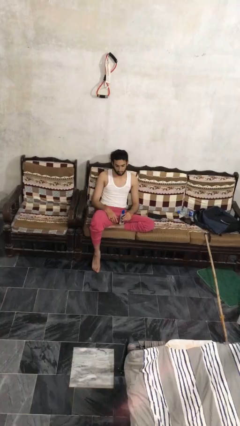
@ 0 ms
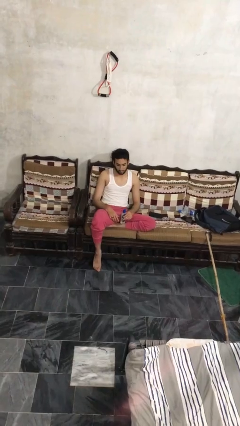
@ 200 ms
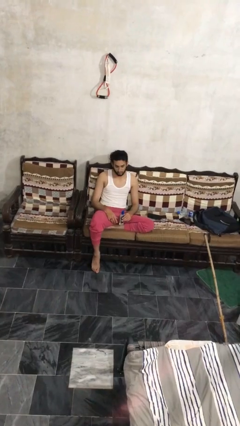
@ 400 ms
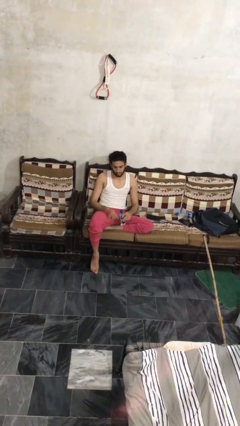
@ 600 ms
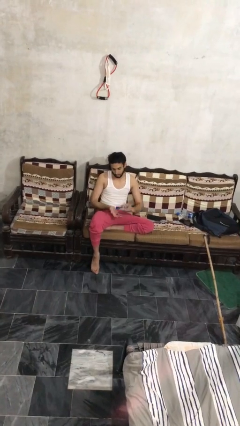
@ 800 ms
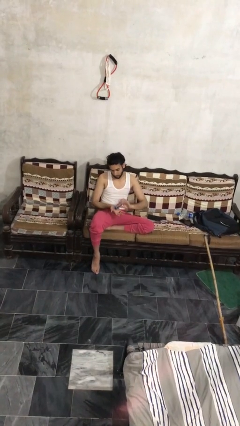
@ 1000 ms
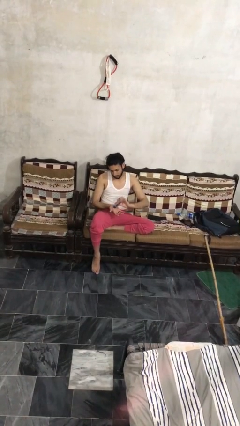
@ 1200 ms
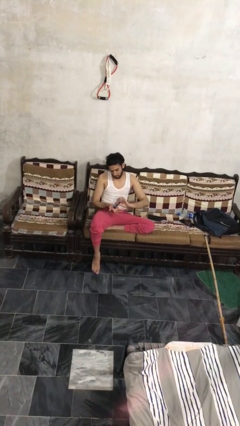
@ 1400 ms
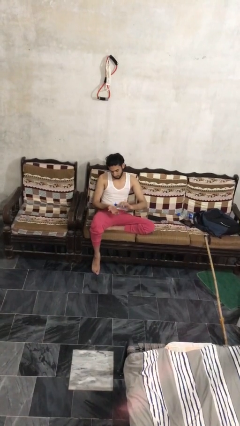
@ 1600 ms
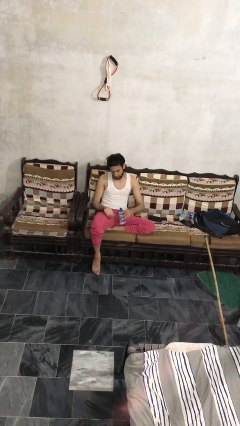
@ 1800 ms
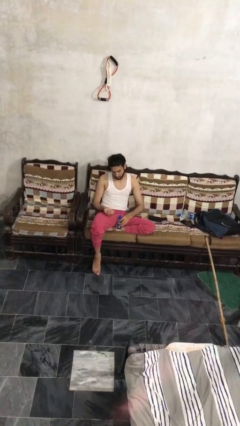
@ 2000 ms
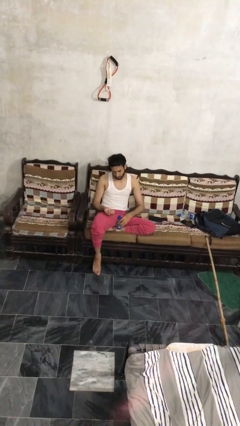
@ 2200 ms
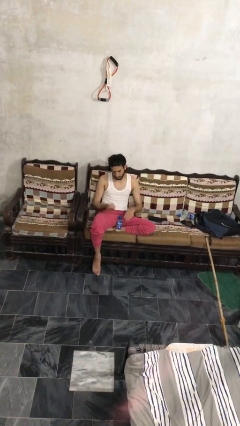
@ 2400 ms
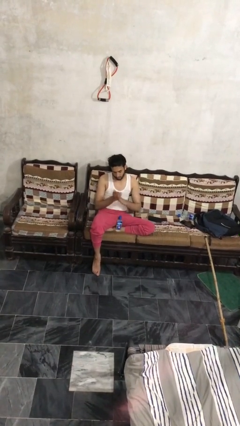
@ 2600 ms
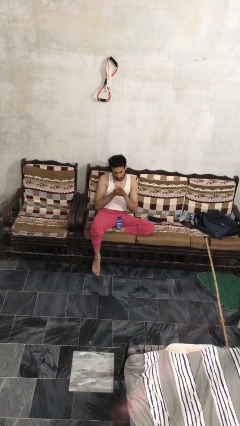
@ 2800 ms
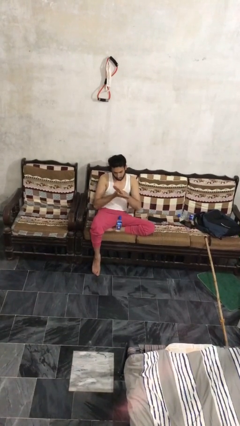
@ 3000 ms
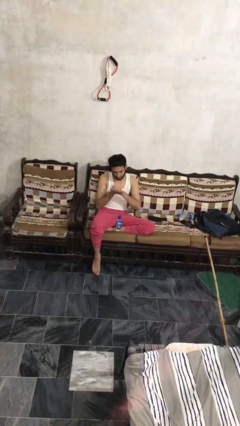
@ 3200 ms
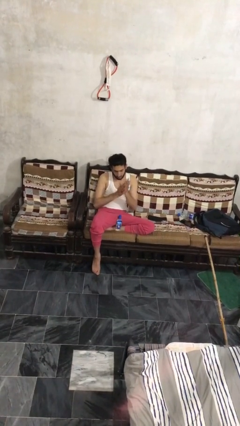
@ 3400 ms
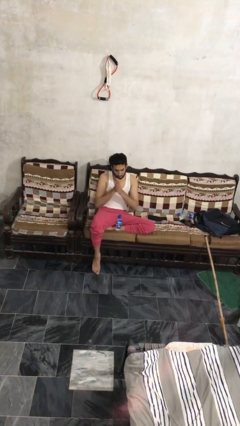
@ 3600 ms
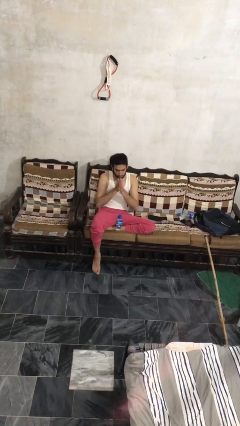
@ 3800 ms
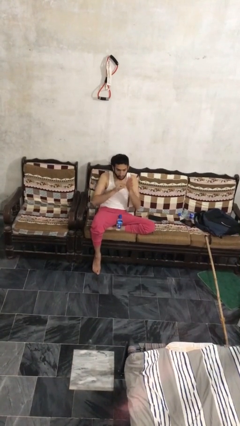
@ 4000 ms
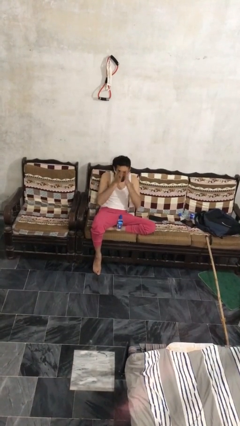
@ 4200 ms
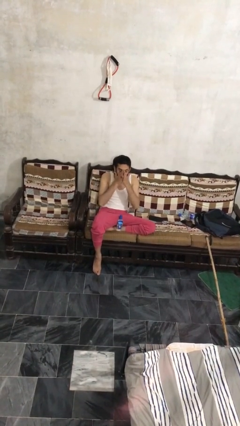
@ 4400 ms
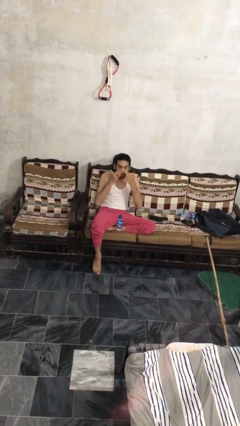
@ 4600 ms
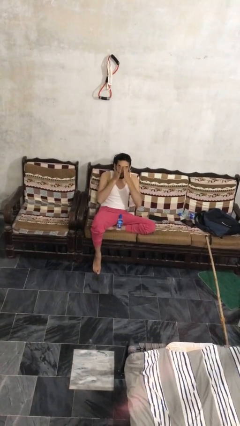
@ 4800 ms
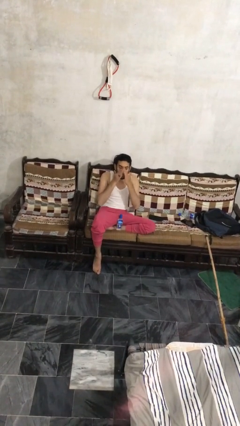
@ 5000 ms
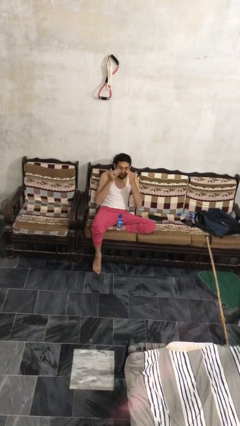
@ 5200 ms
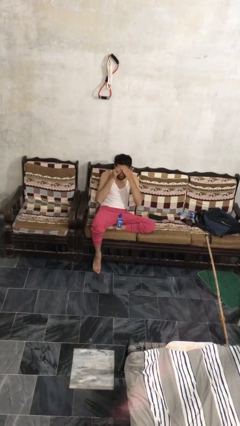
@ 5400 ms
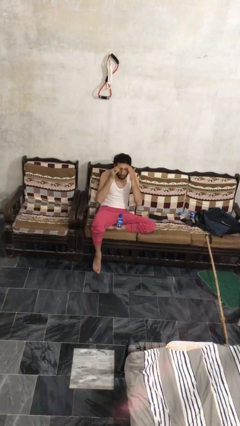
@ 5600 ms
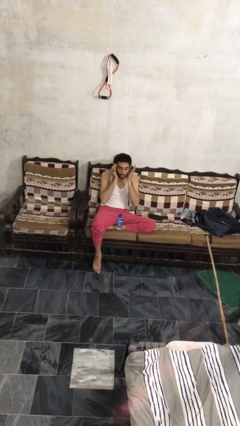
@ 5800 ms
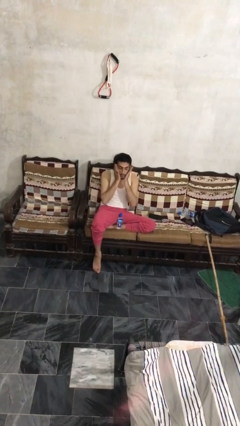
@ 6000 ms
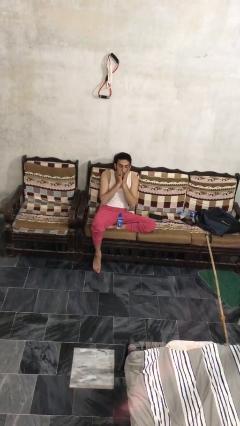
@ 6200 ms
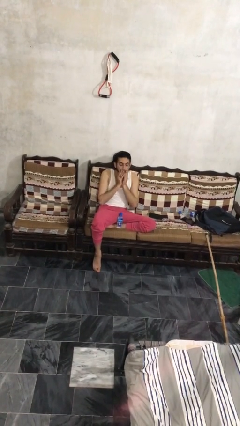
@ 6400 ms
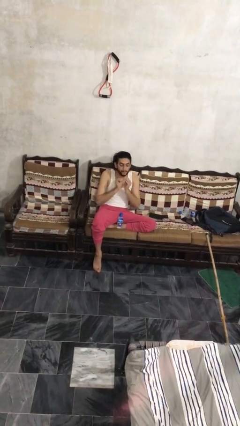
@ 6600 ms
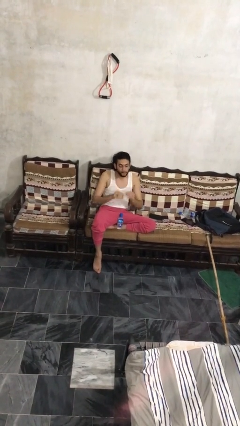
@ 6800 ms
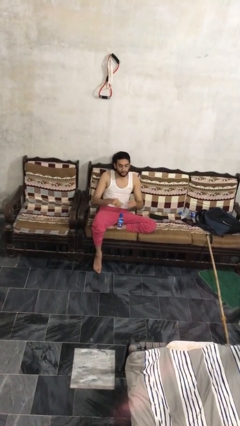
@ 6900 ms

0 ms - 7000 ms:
person applies facial moisturizer

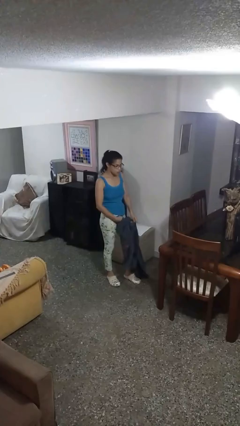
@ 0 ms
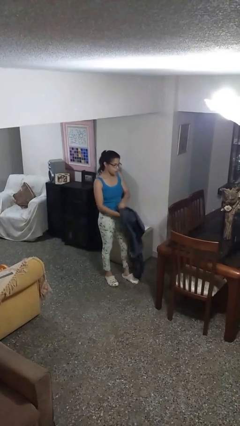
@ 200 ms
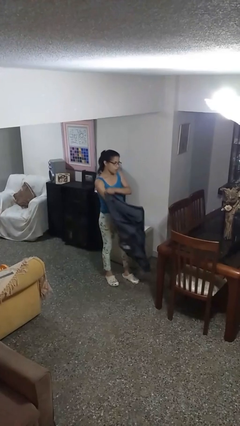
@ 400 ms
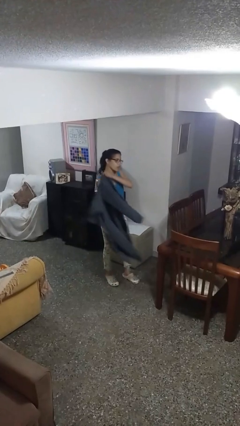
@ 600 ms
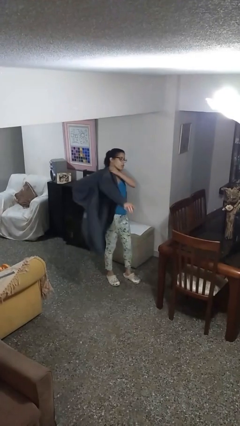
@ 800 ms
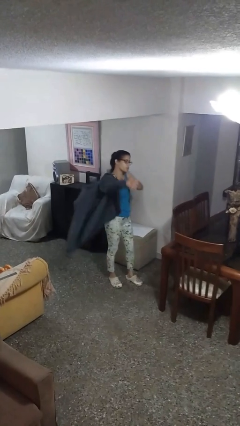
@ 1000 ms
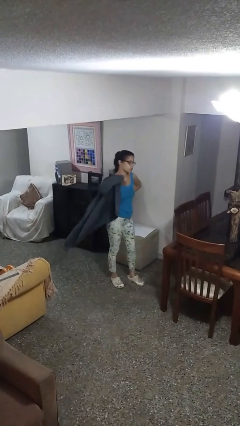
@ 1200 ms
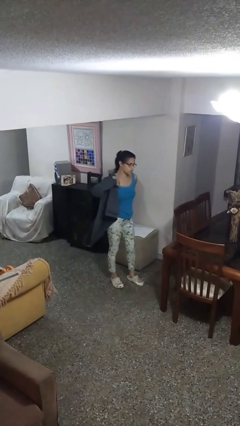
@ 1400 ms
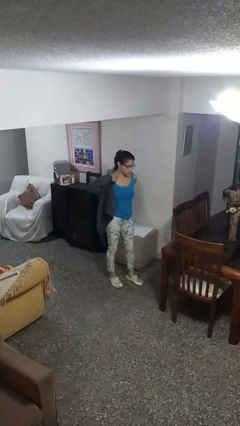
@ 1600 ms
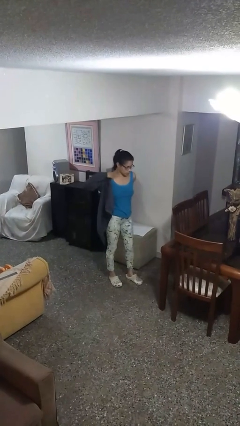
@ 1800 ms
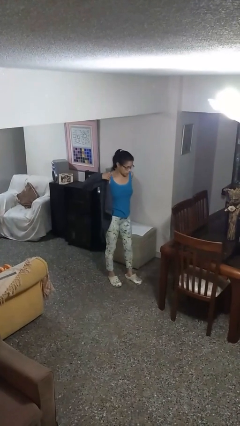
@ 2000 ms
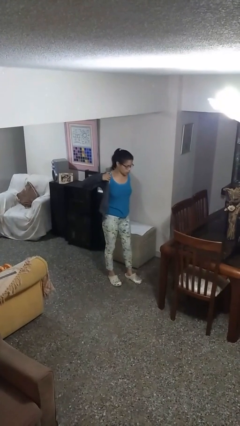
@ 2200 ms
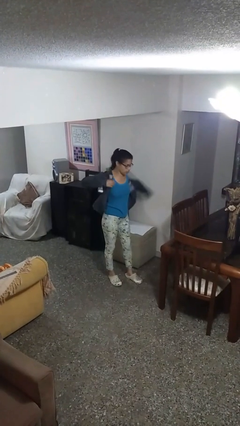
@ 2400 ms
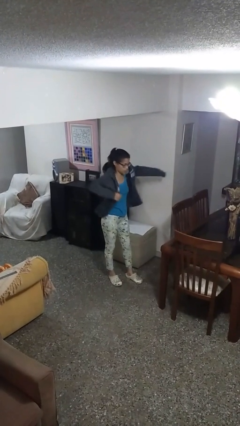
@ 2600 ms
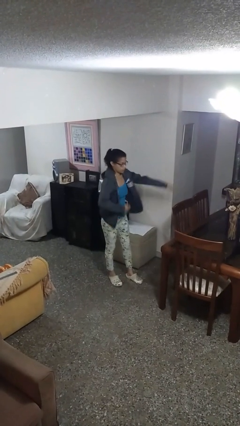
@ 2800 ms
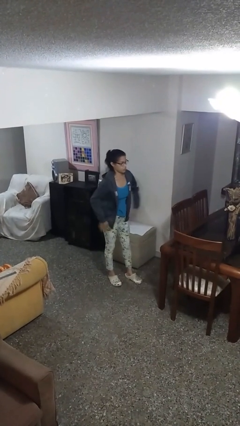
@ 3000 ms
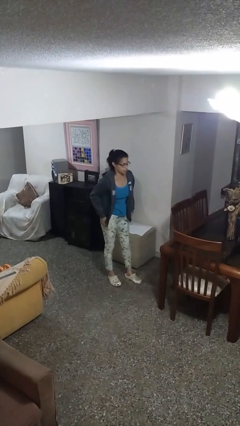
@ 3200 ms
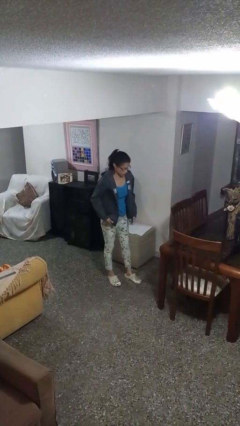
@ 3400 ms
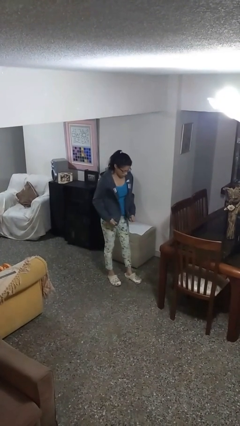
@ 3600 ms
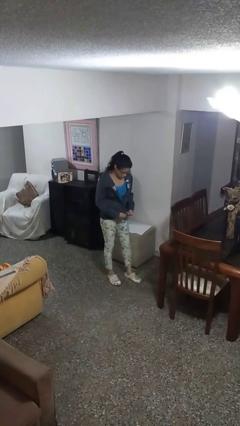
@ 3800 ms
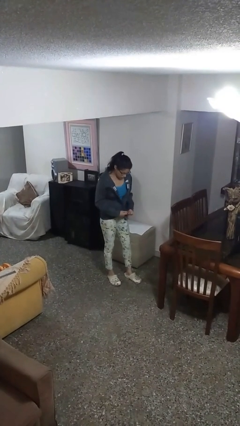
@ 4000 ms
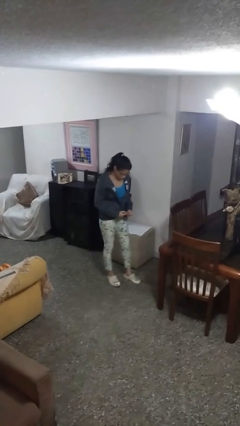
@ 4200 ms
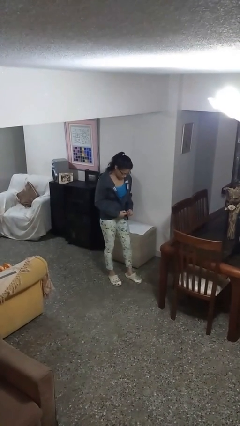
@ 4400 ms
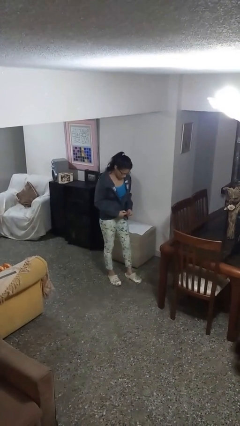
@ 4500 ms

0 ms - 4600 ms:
person puts on jacket

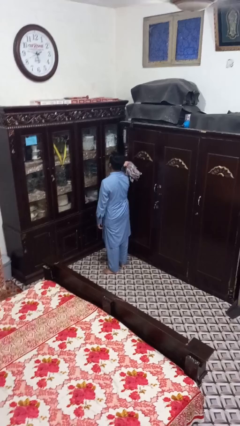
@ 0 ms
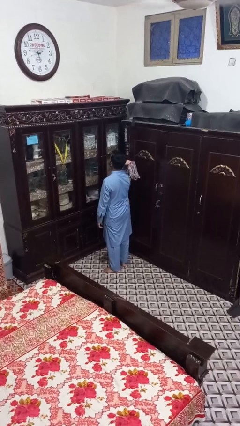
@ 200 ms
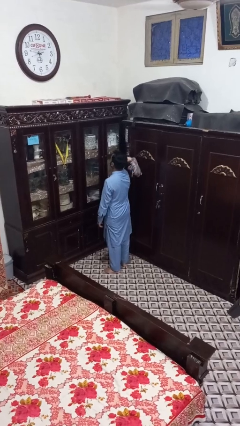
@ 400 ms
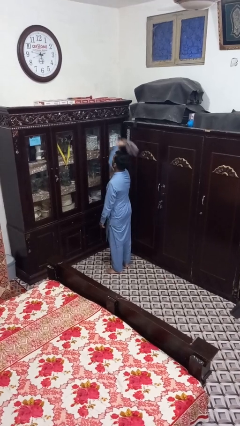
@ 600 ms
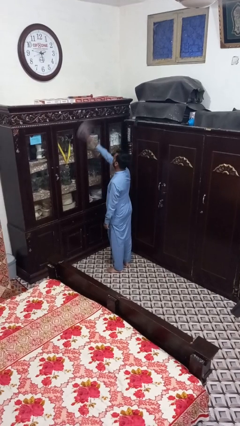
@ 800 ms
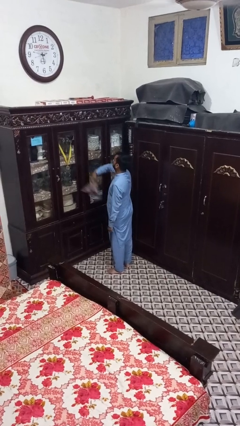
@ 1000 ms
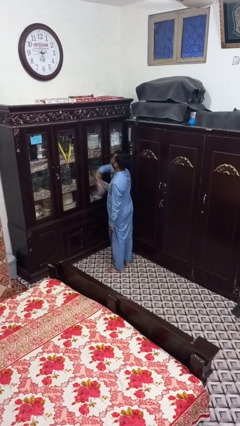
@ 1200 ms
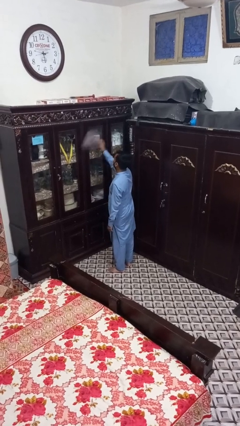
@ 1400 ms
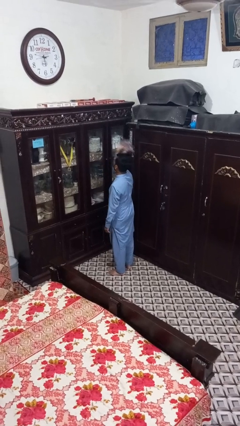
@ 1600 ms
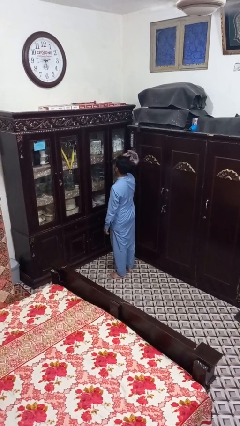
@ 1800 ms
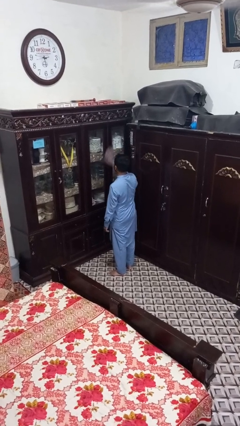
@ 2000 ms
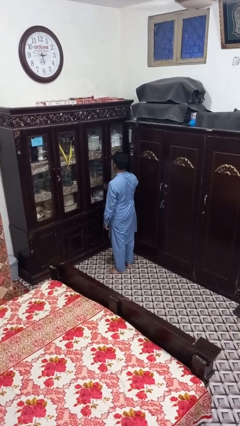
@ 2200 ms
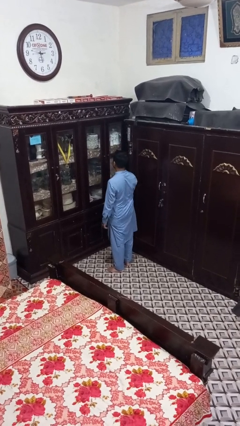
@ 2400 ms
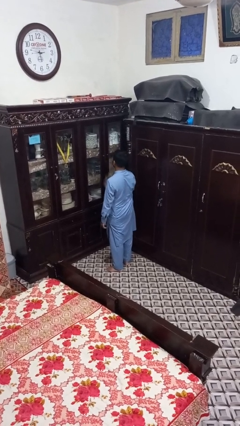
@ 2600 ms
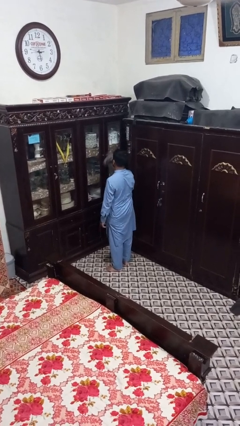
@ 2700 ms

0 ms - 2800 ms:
person dusts furniture

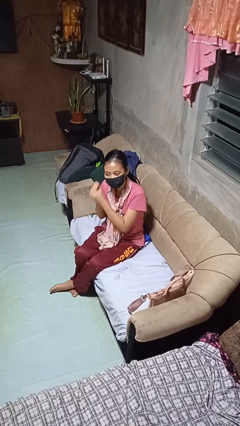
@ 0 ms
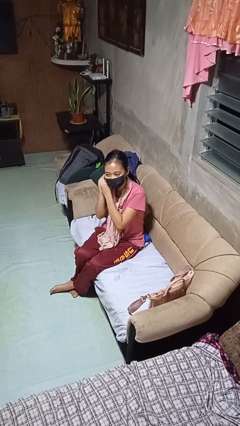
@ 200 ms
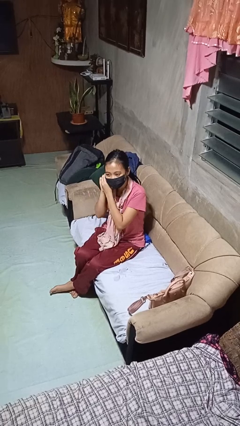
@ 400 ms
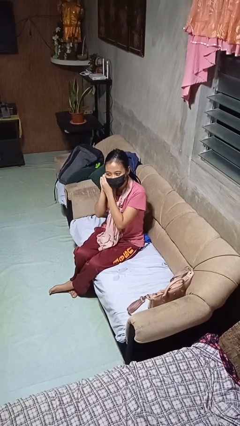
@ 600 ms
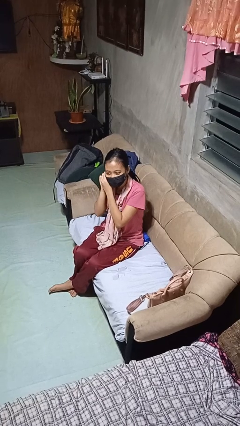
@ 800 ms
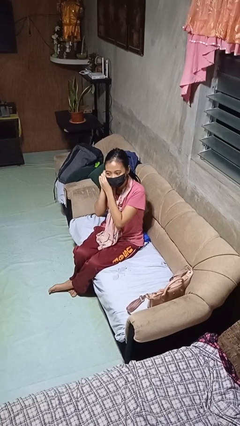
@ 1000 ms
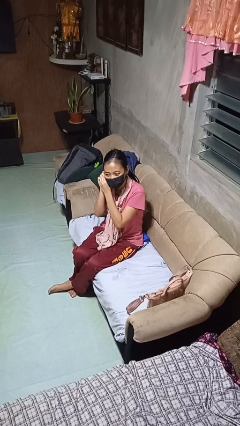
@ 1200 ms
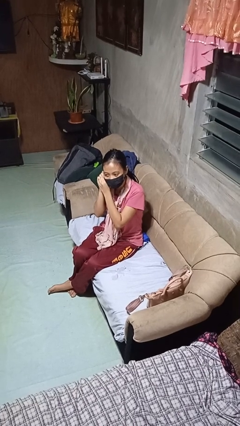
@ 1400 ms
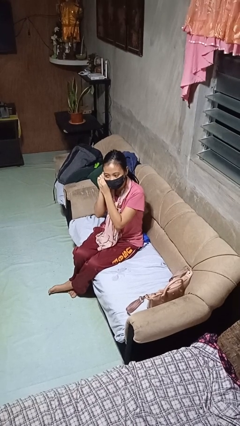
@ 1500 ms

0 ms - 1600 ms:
person takes off earrings

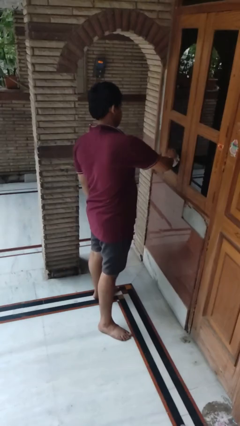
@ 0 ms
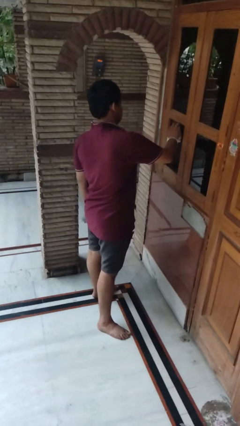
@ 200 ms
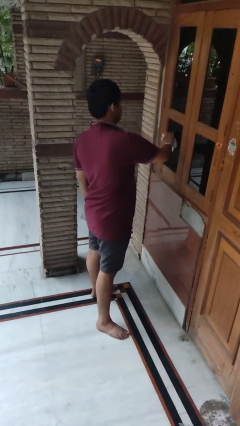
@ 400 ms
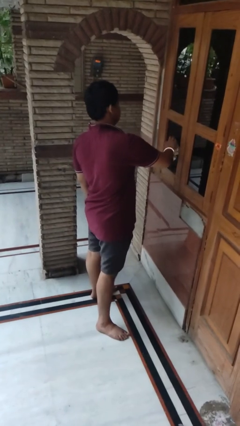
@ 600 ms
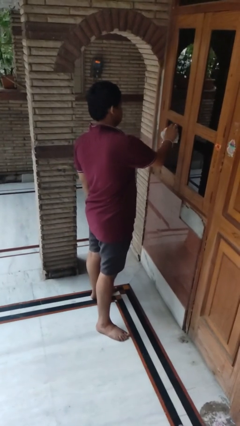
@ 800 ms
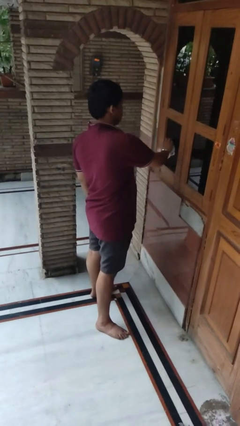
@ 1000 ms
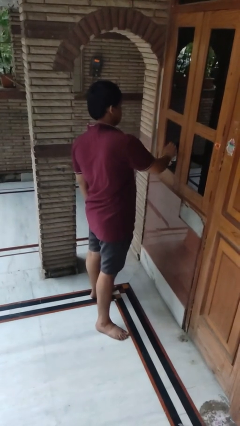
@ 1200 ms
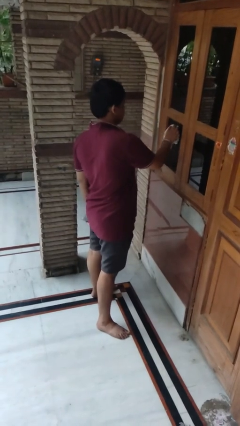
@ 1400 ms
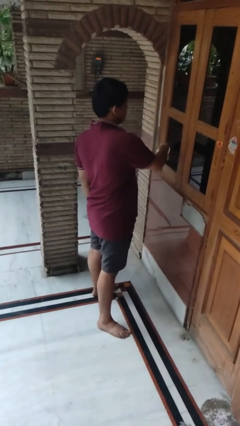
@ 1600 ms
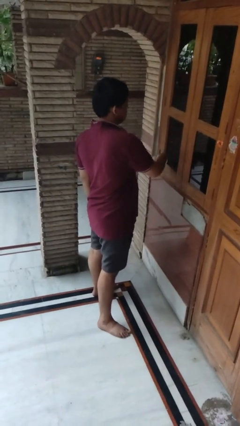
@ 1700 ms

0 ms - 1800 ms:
person washes window
